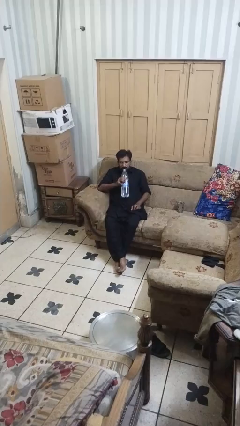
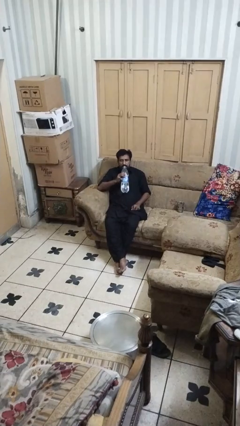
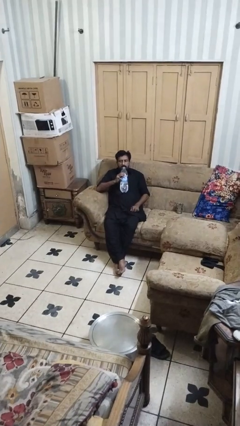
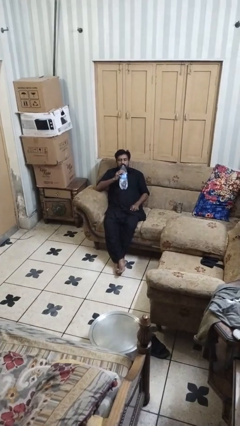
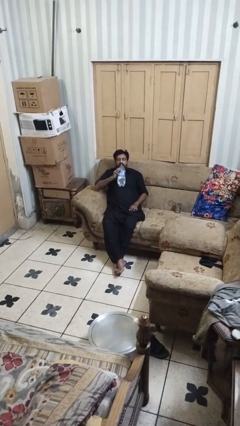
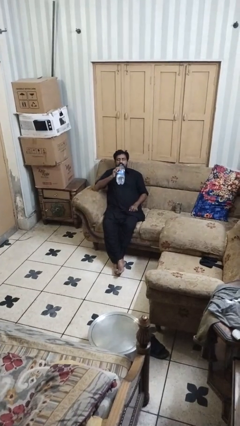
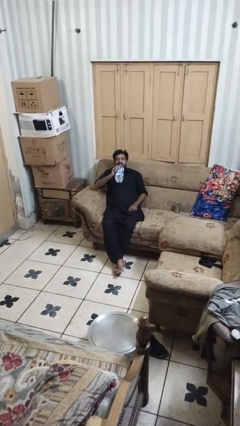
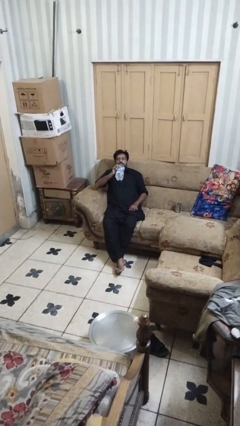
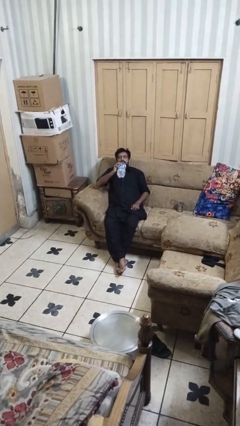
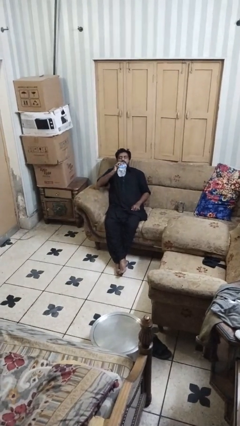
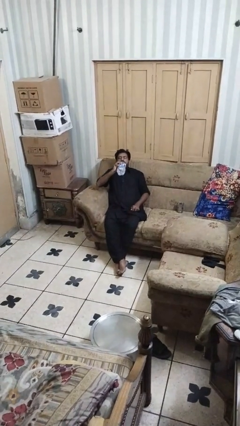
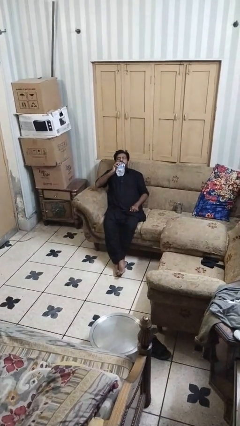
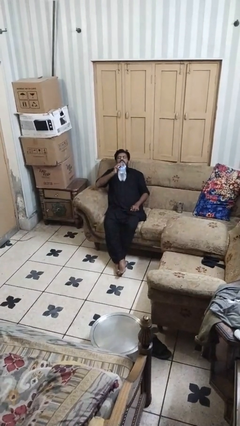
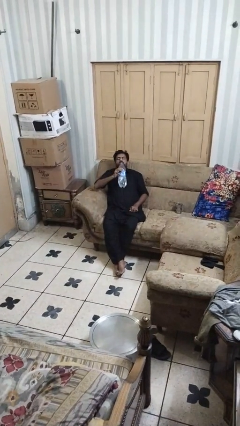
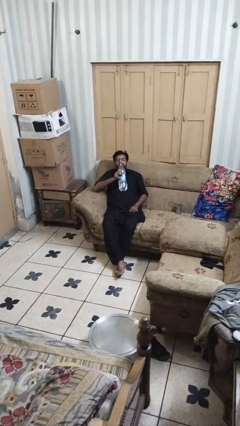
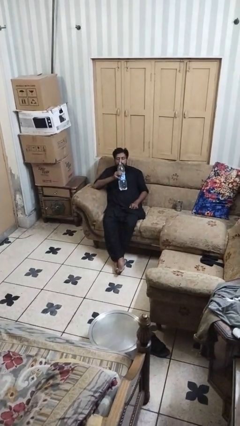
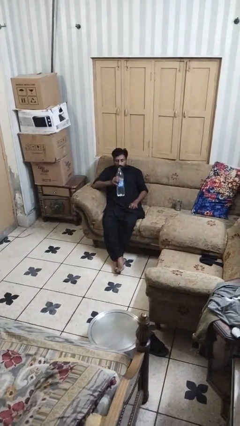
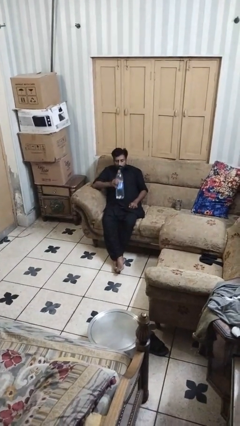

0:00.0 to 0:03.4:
person drinks from bottle

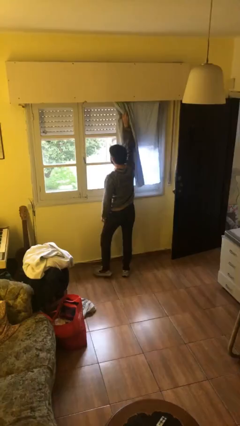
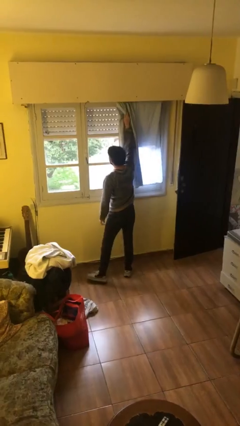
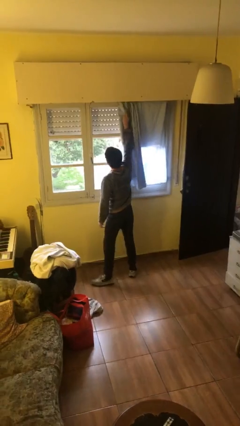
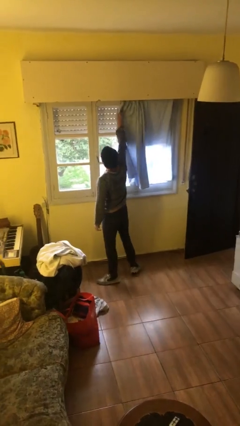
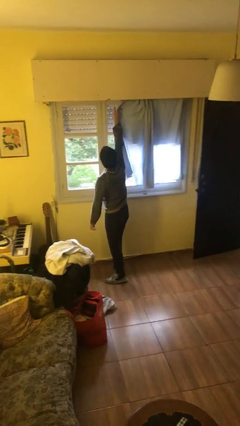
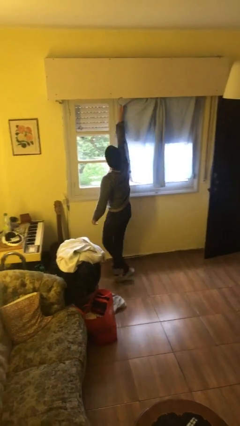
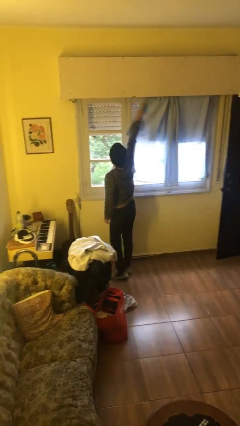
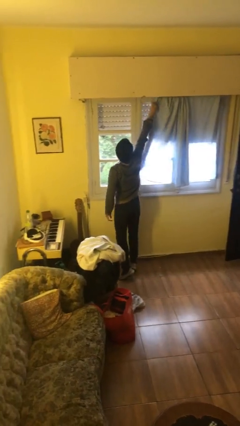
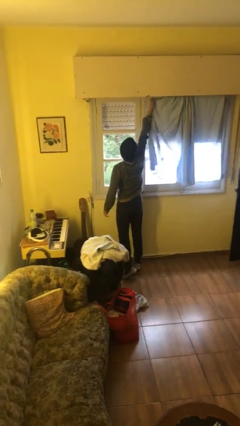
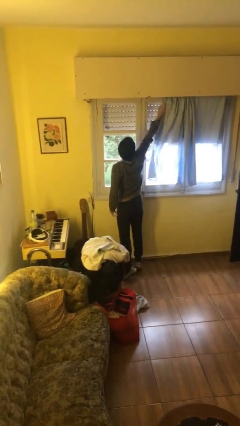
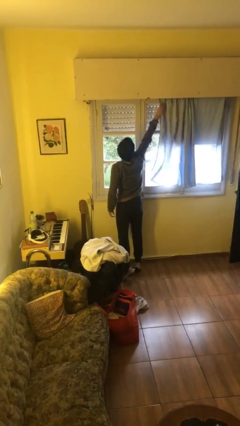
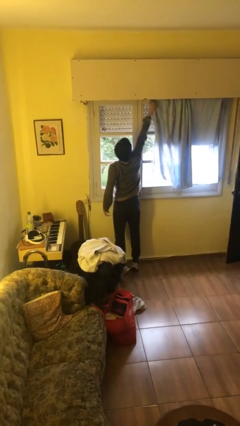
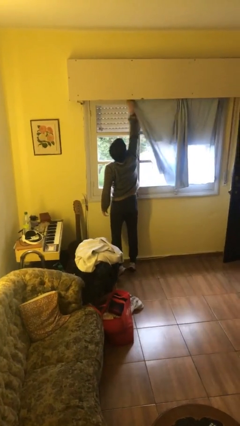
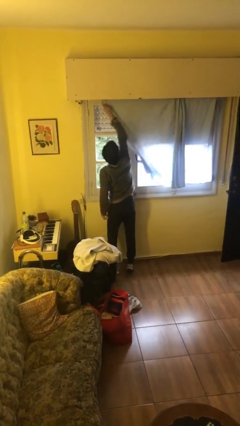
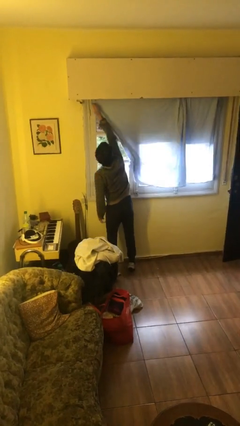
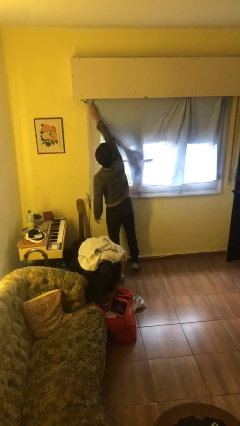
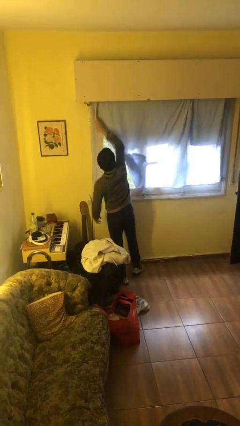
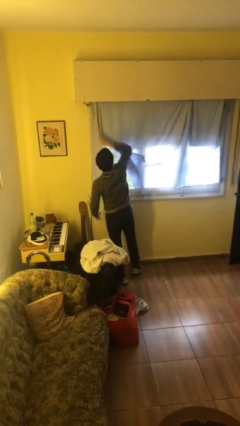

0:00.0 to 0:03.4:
person closes curtains

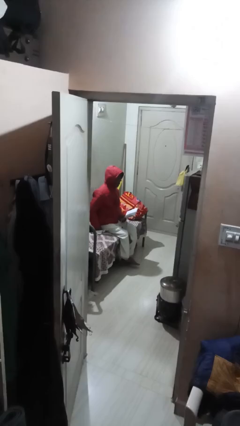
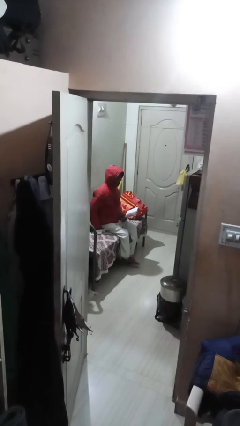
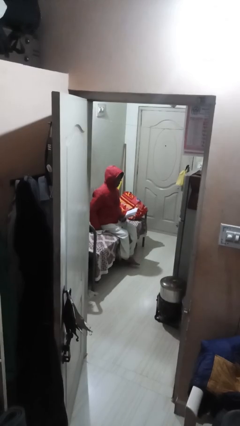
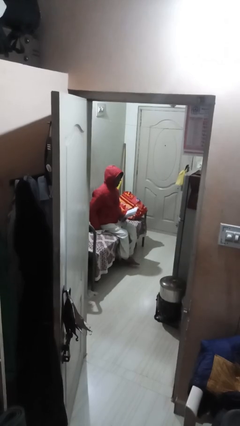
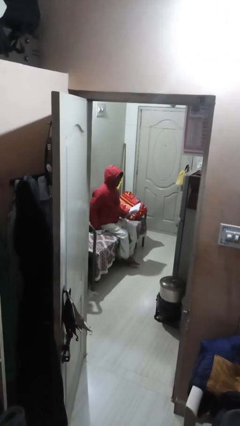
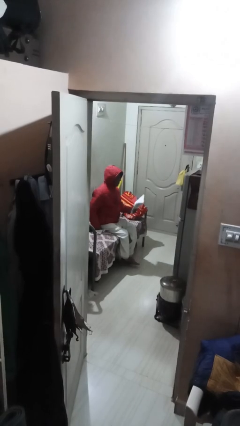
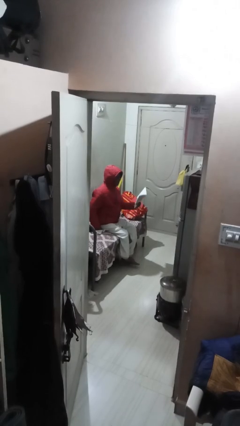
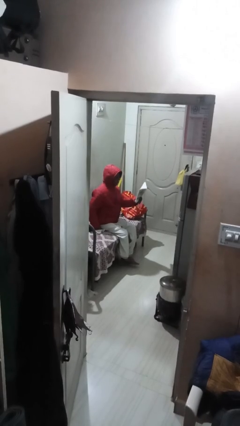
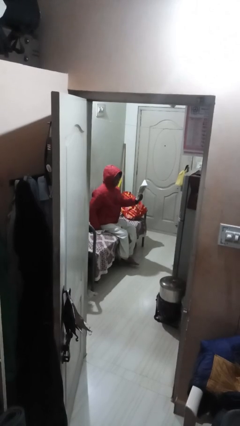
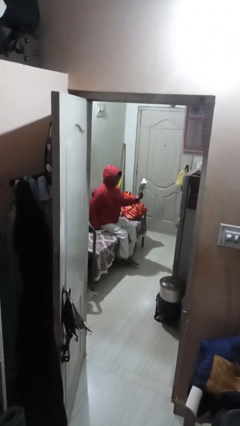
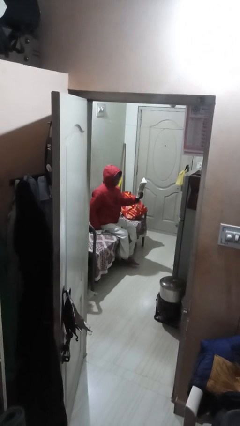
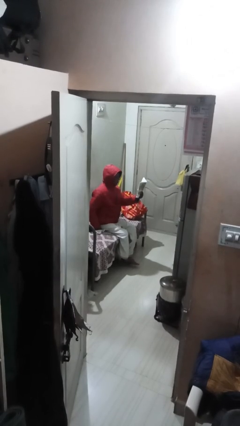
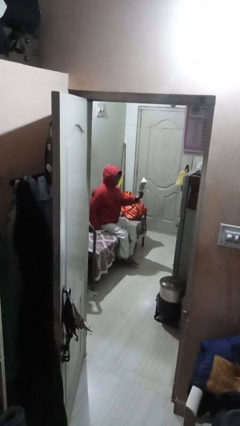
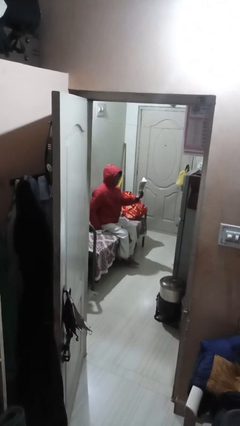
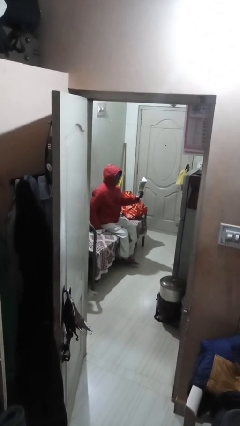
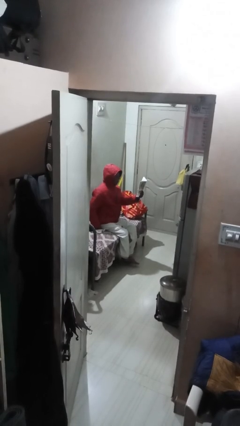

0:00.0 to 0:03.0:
person reads document

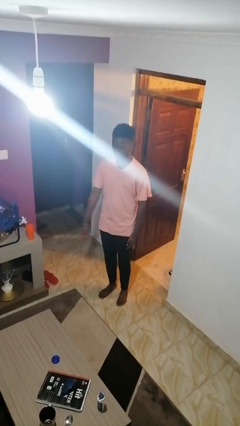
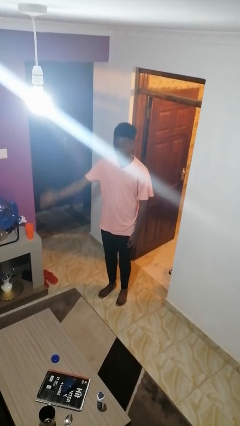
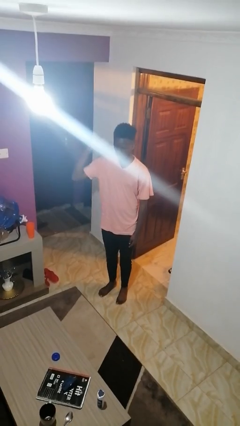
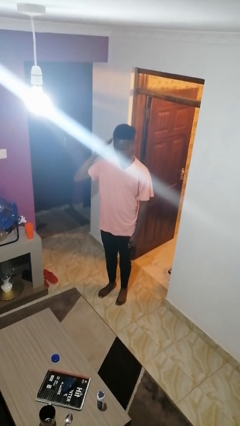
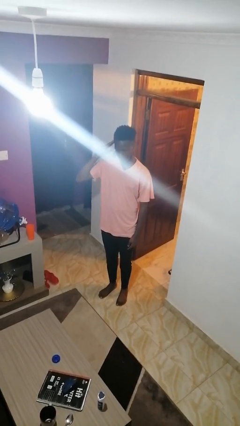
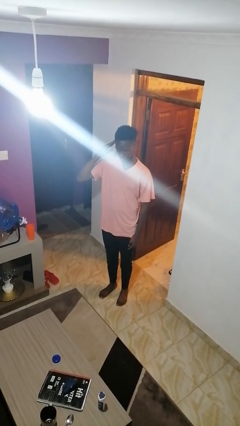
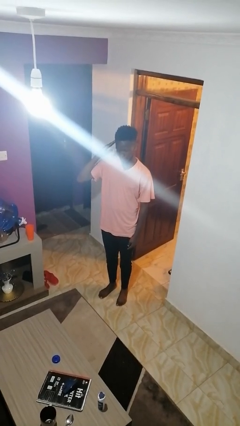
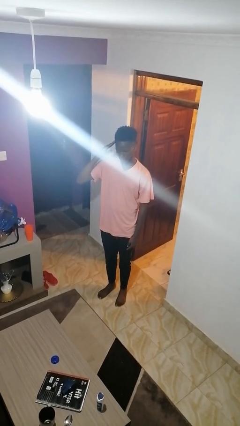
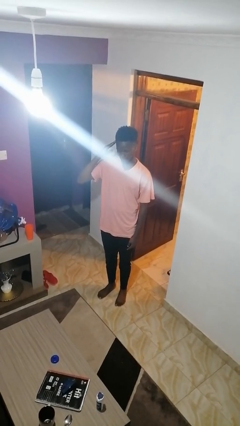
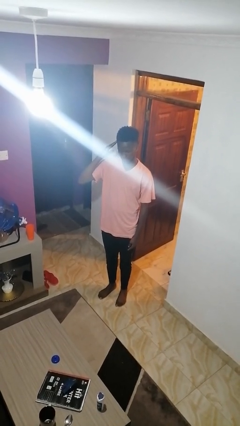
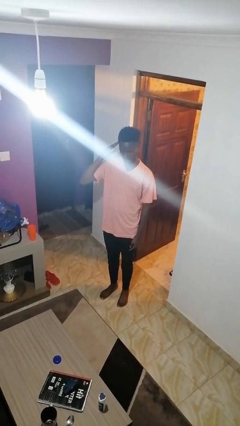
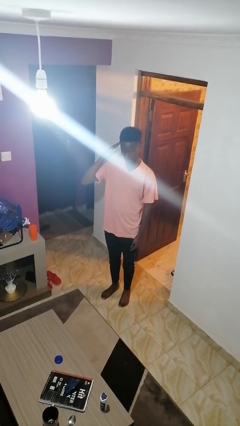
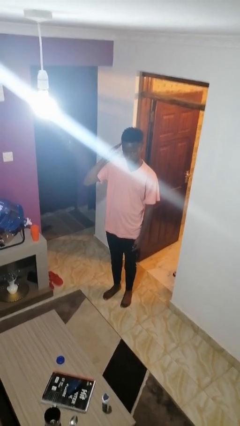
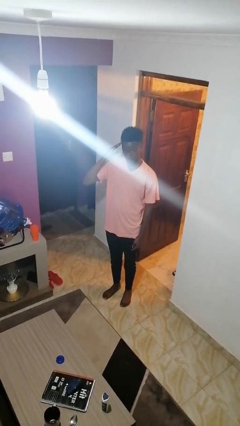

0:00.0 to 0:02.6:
person salutes

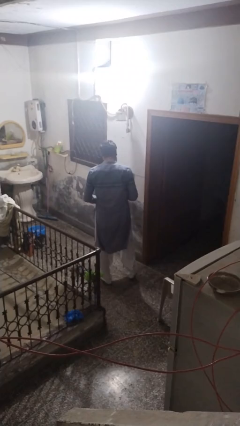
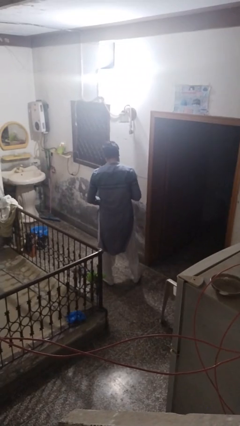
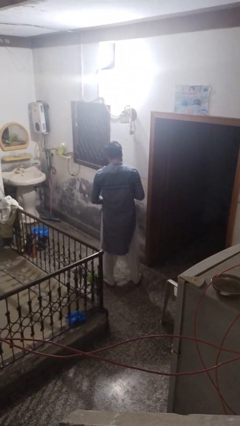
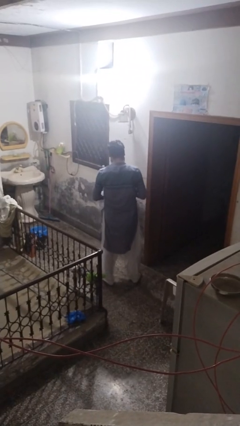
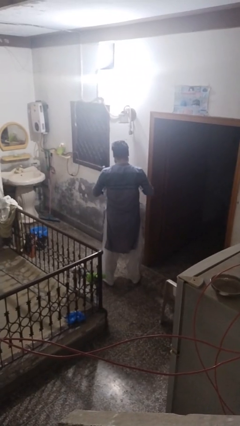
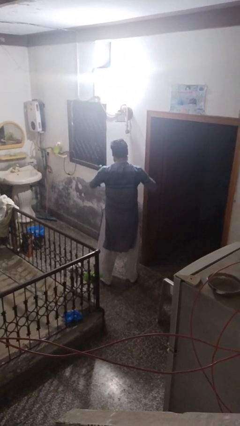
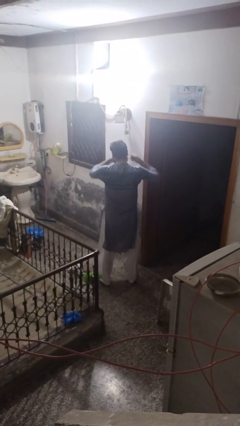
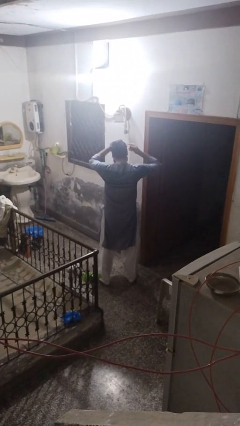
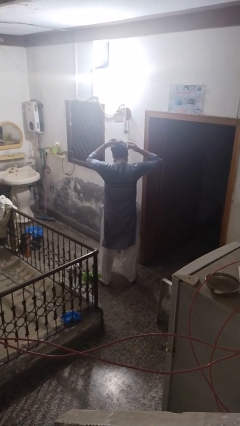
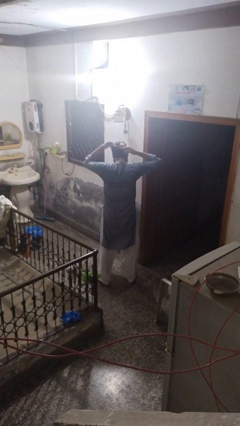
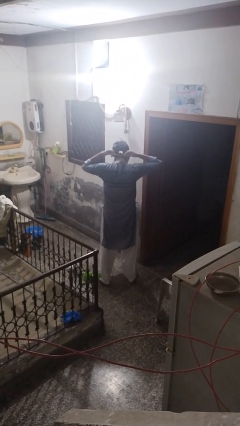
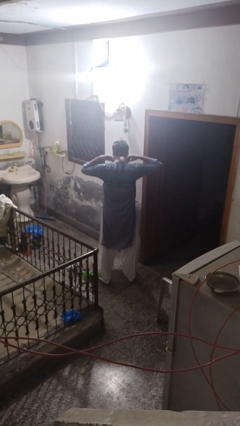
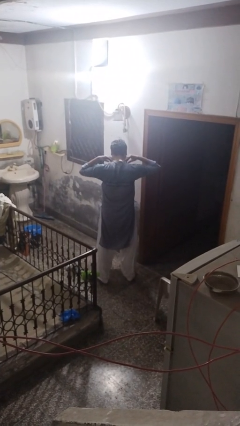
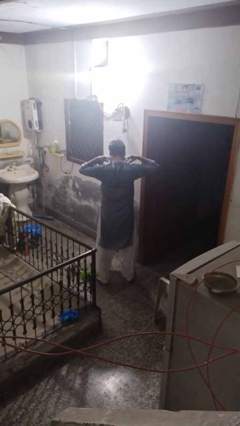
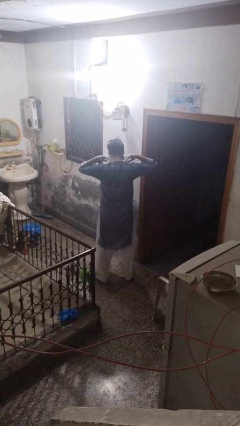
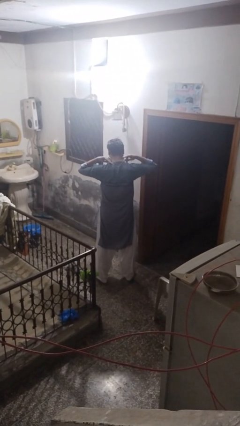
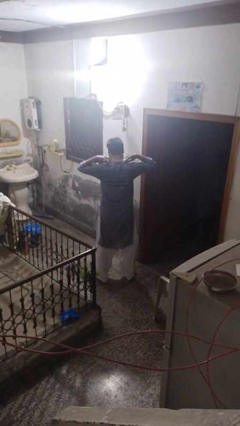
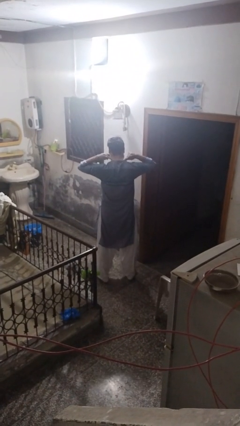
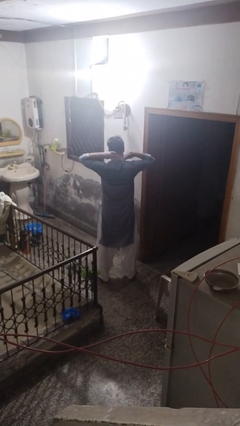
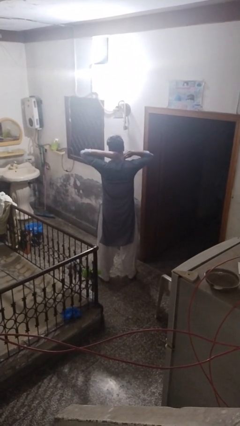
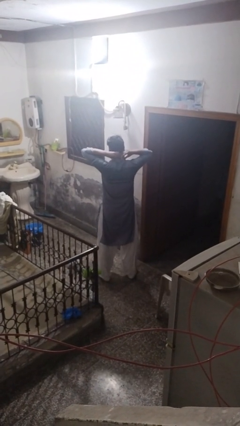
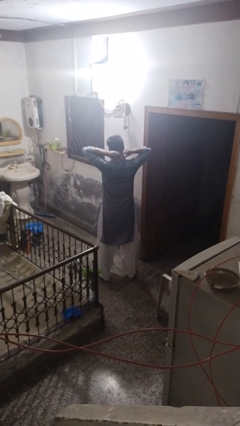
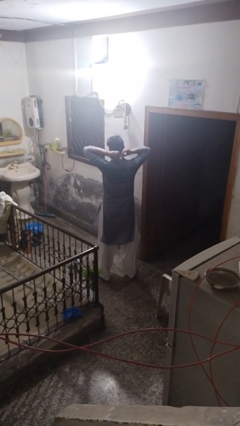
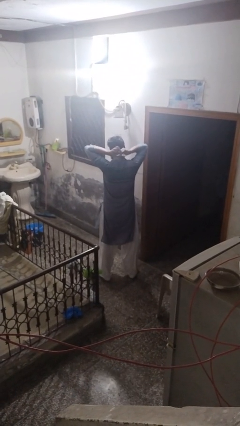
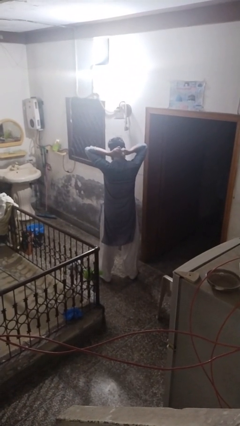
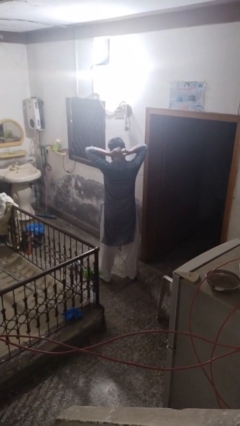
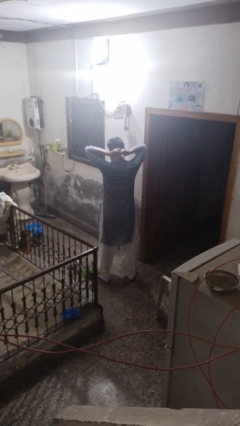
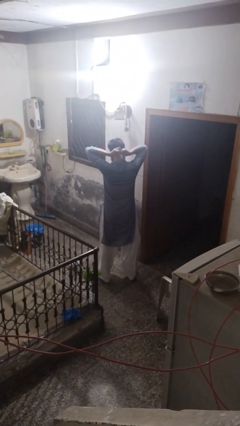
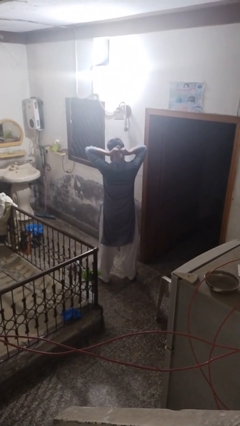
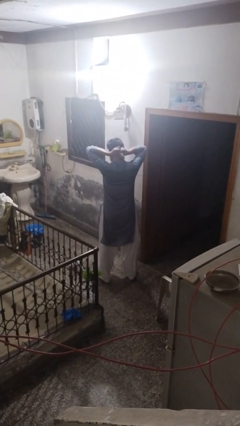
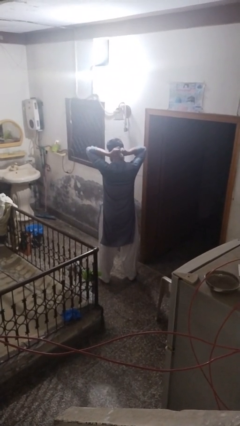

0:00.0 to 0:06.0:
person puts on necklace
